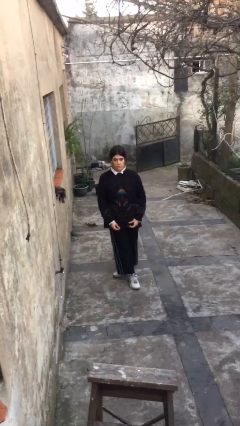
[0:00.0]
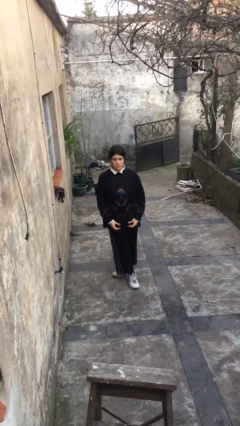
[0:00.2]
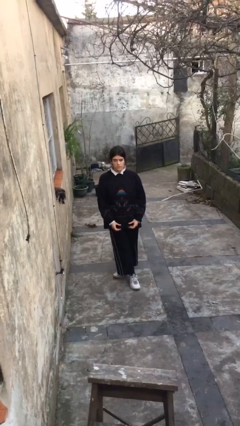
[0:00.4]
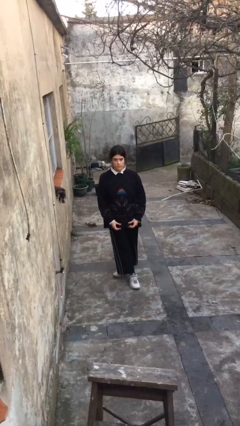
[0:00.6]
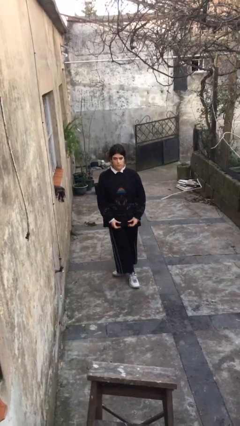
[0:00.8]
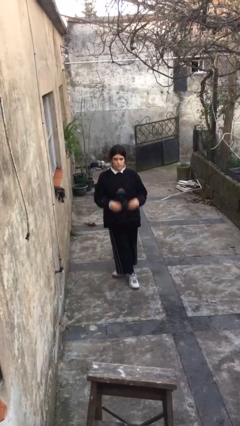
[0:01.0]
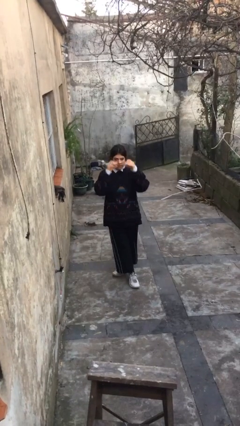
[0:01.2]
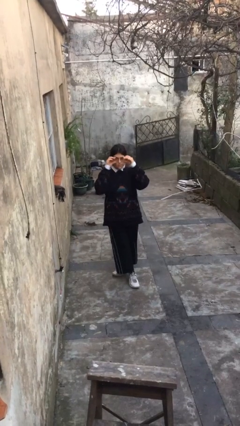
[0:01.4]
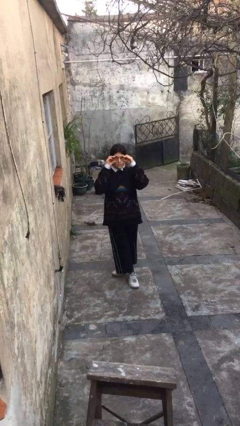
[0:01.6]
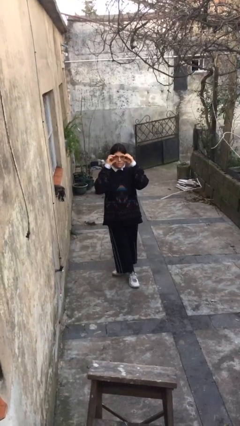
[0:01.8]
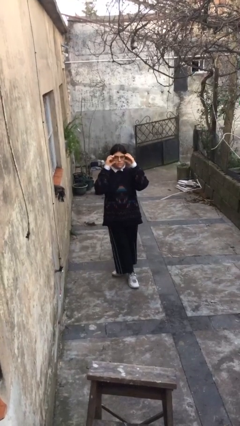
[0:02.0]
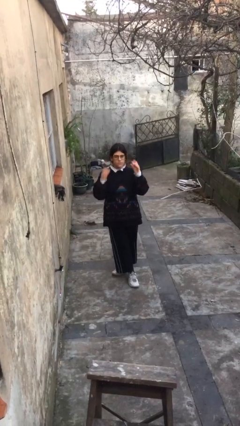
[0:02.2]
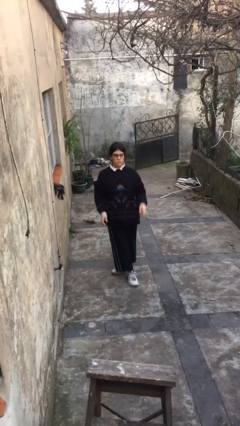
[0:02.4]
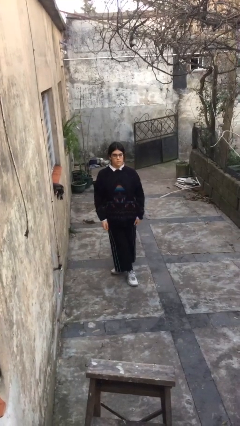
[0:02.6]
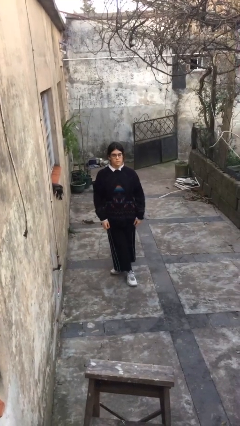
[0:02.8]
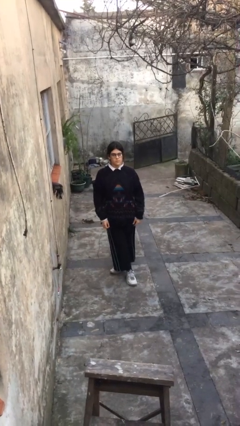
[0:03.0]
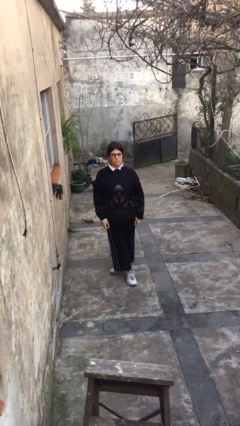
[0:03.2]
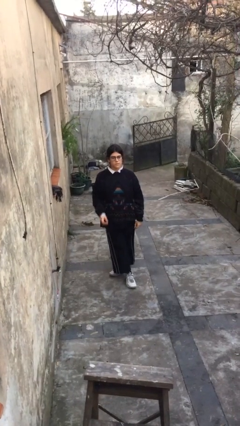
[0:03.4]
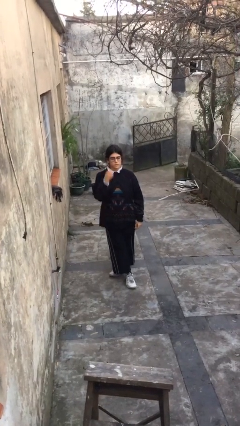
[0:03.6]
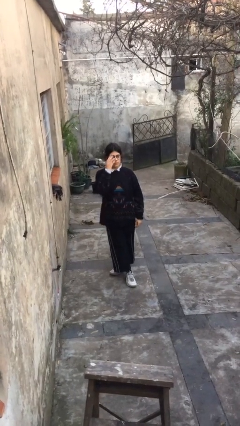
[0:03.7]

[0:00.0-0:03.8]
person puts on glasses

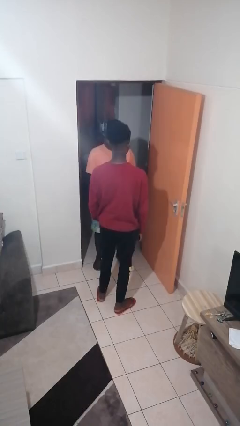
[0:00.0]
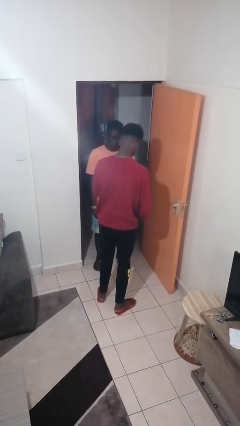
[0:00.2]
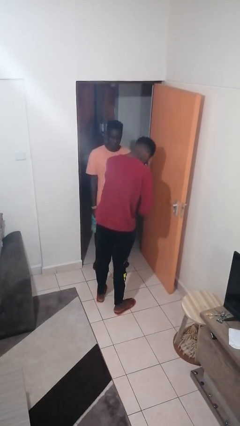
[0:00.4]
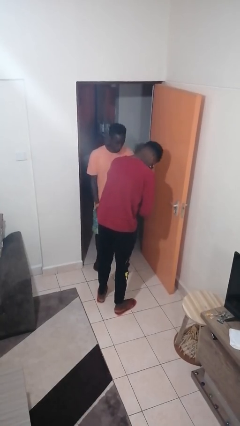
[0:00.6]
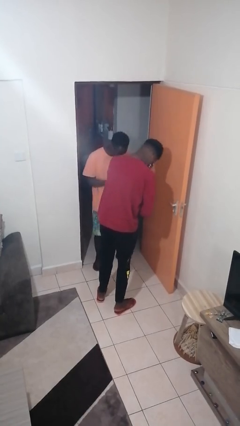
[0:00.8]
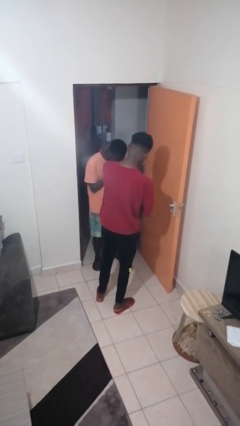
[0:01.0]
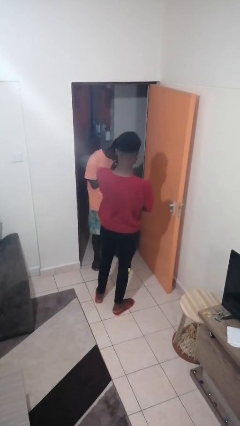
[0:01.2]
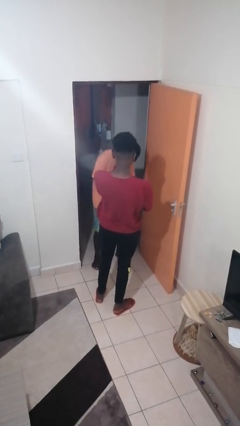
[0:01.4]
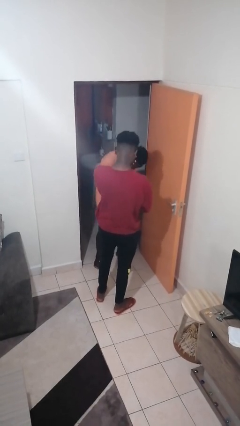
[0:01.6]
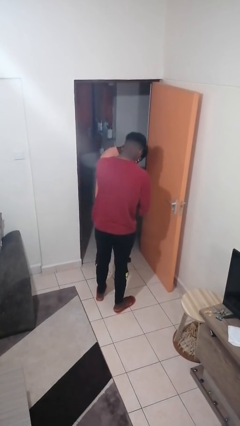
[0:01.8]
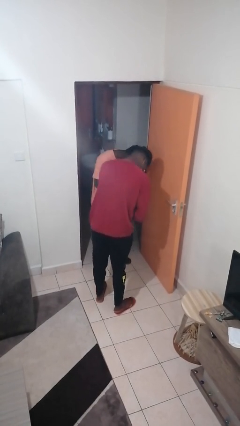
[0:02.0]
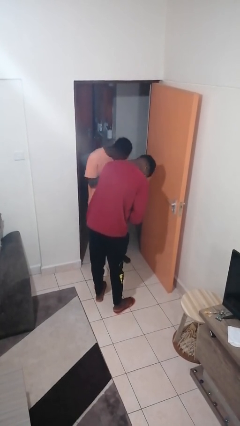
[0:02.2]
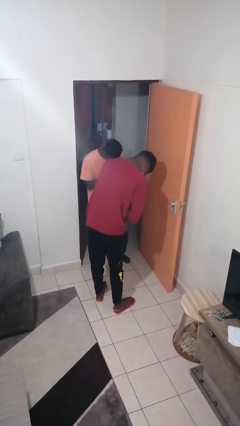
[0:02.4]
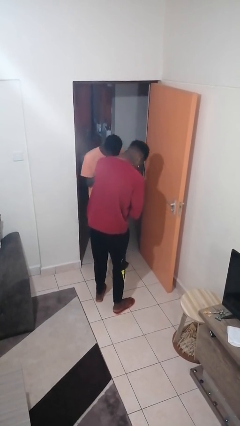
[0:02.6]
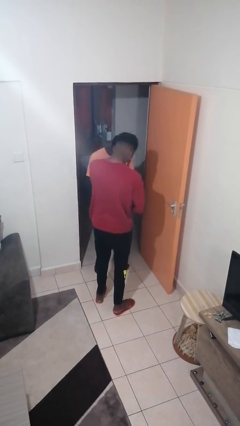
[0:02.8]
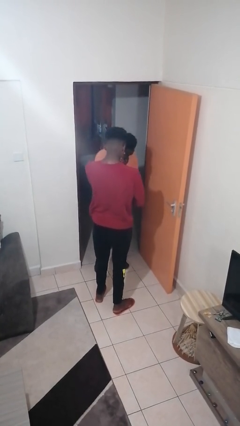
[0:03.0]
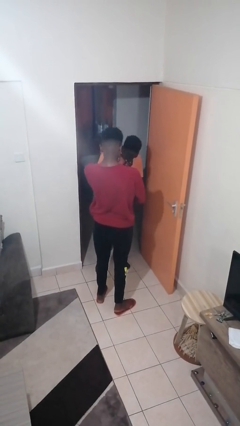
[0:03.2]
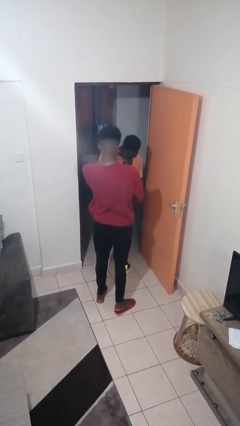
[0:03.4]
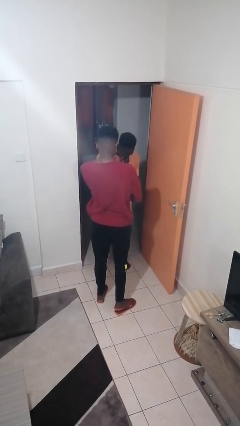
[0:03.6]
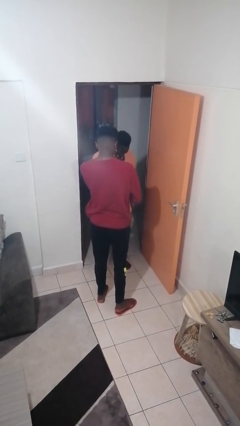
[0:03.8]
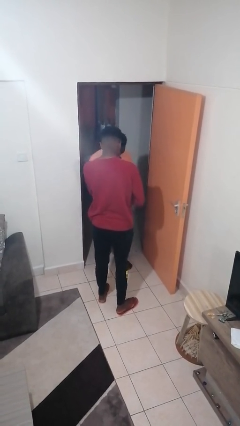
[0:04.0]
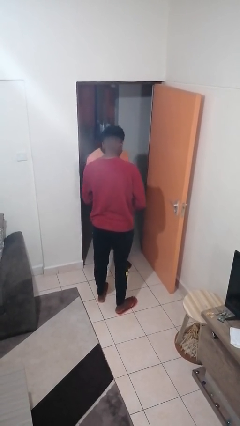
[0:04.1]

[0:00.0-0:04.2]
person laughs with person

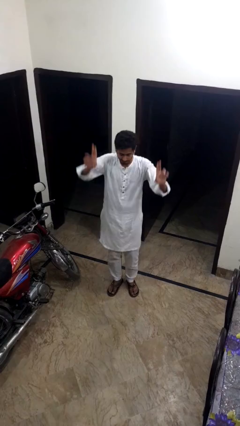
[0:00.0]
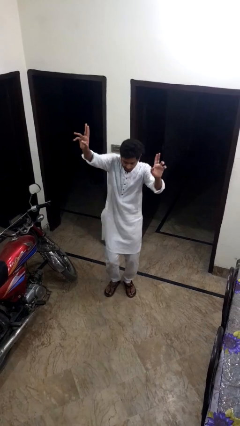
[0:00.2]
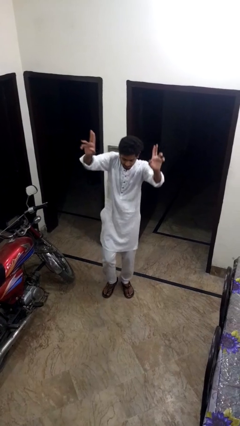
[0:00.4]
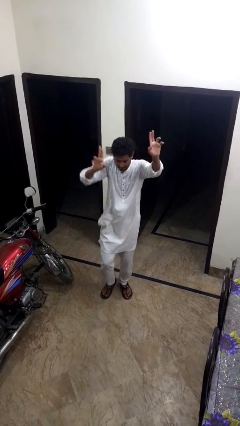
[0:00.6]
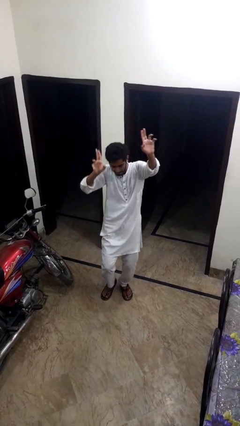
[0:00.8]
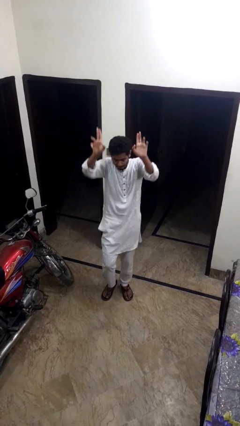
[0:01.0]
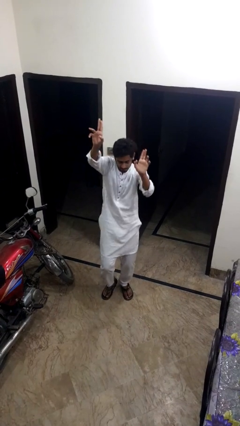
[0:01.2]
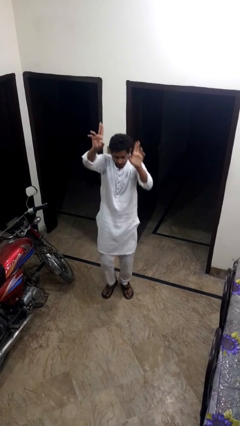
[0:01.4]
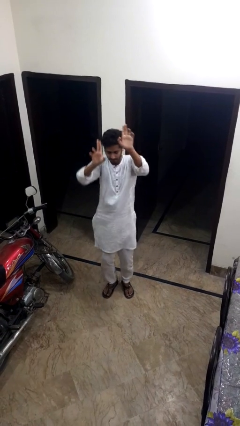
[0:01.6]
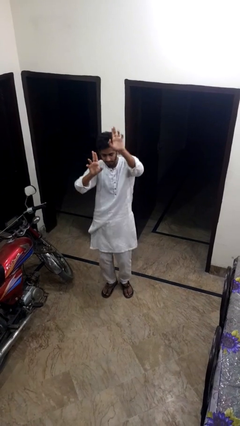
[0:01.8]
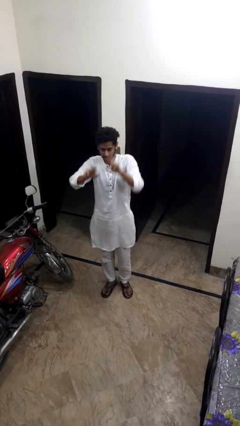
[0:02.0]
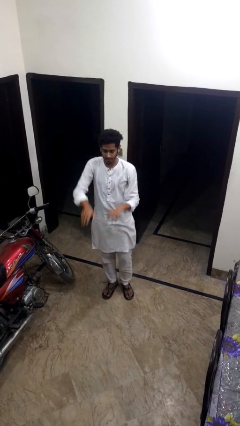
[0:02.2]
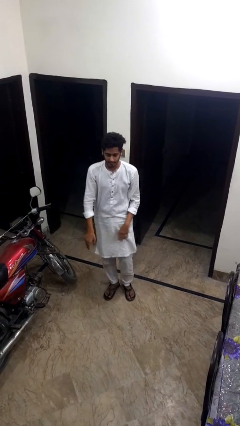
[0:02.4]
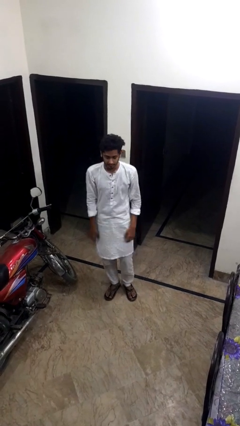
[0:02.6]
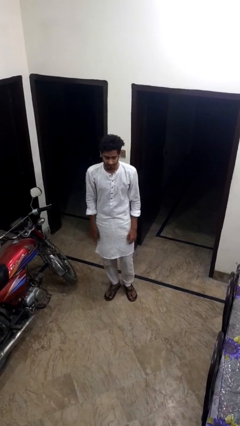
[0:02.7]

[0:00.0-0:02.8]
person dances in place

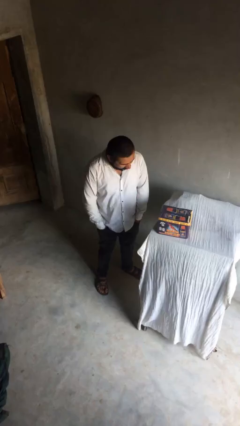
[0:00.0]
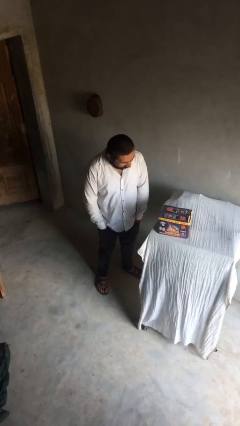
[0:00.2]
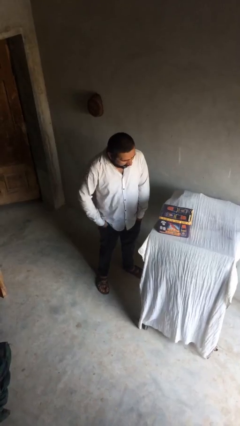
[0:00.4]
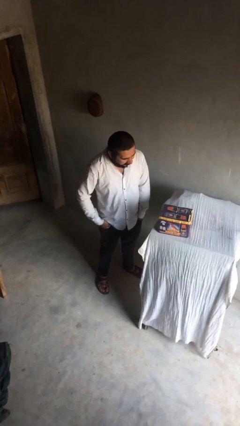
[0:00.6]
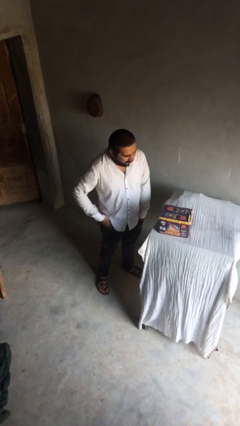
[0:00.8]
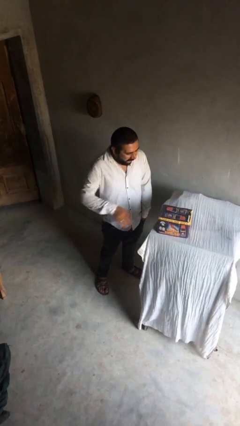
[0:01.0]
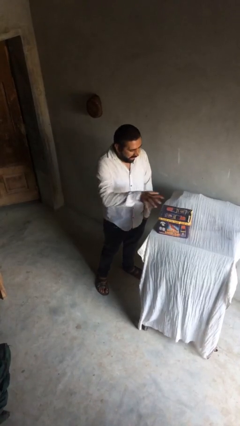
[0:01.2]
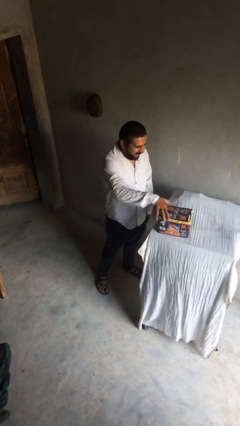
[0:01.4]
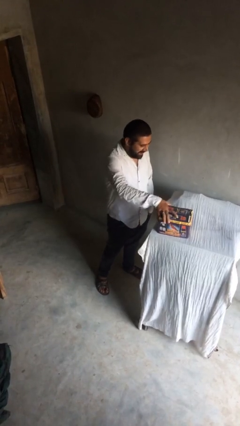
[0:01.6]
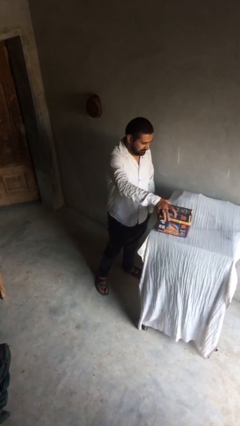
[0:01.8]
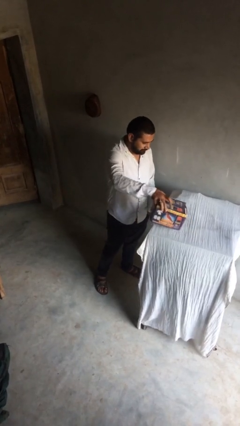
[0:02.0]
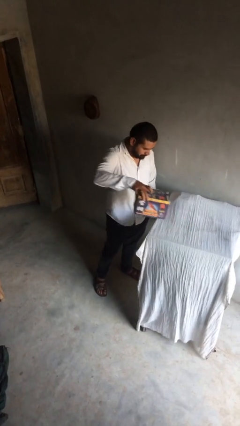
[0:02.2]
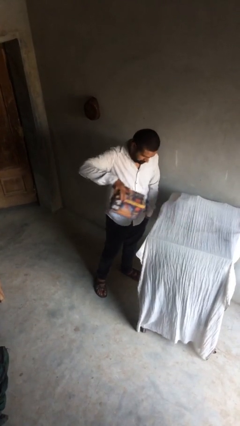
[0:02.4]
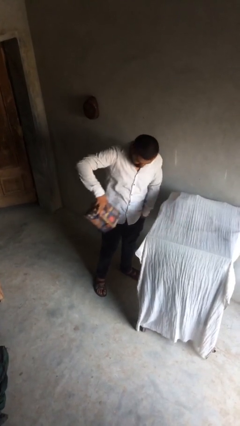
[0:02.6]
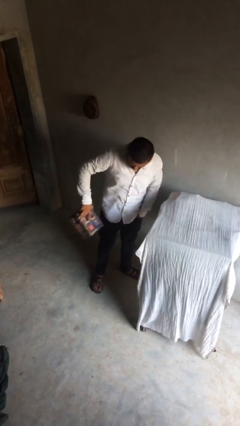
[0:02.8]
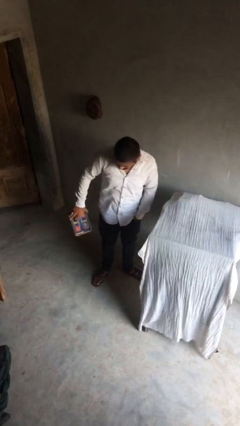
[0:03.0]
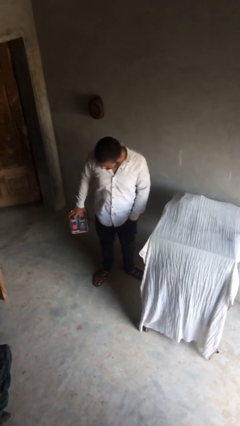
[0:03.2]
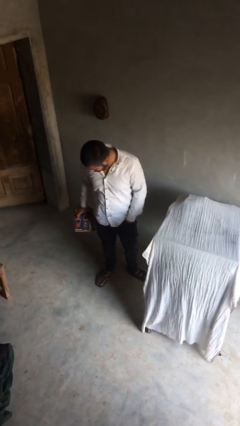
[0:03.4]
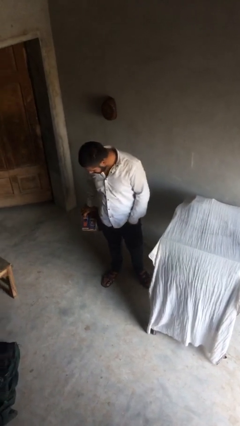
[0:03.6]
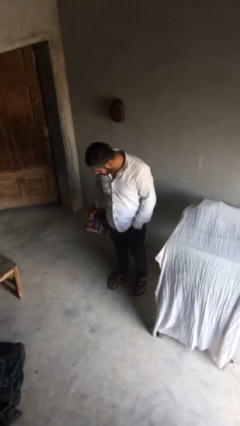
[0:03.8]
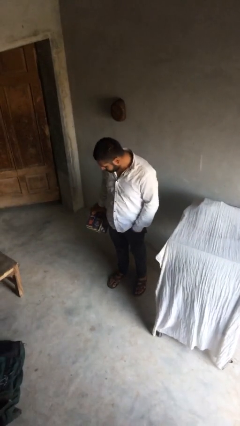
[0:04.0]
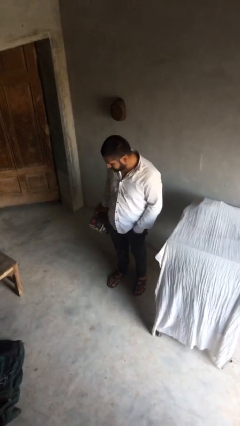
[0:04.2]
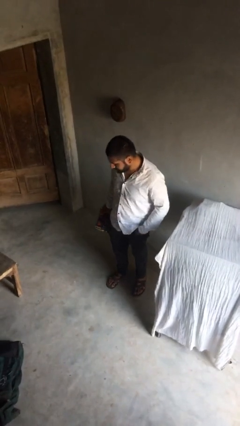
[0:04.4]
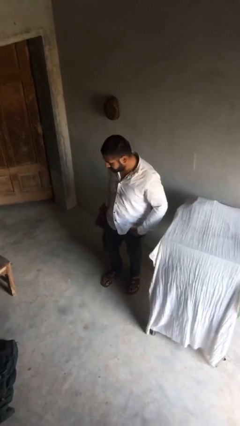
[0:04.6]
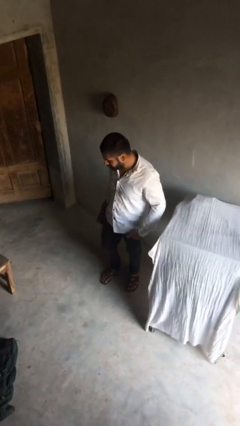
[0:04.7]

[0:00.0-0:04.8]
person picks up object from shelf

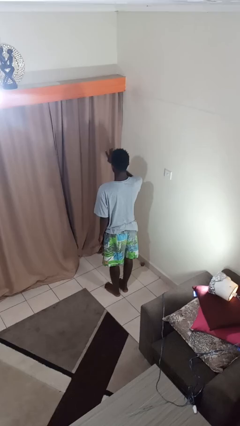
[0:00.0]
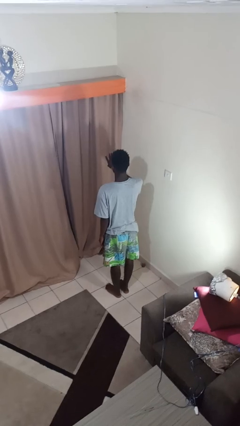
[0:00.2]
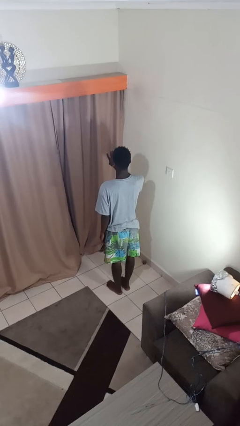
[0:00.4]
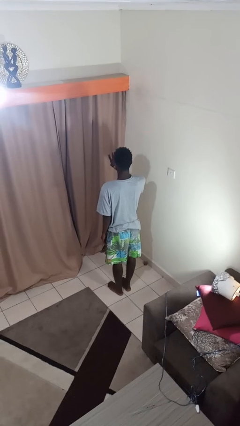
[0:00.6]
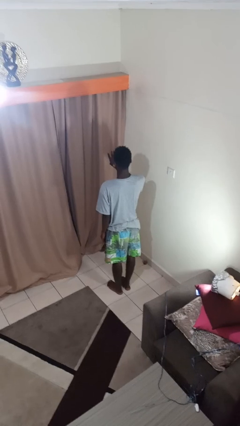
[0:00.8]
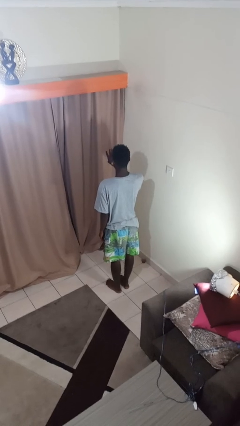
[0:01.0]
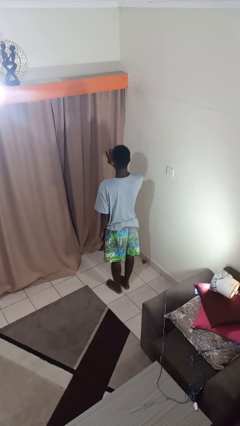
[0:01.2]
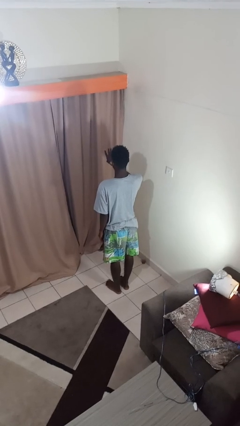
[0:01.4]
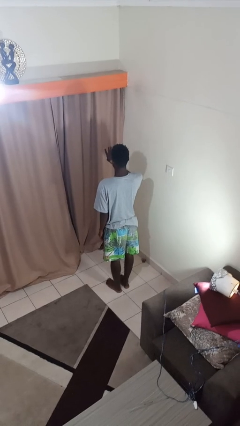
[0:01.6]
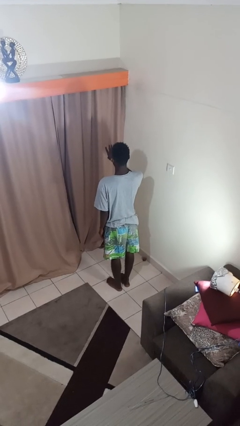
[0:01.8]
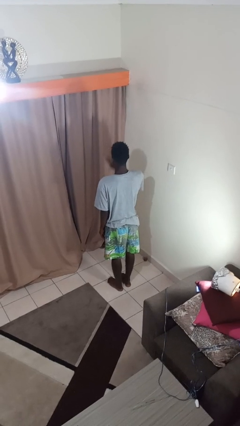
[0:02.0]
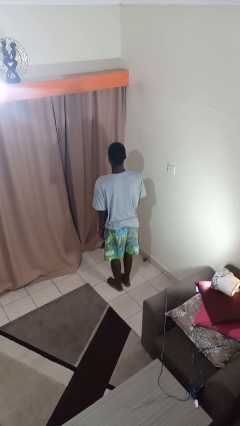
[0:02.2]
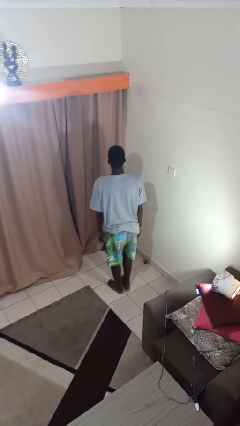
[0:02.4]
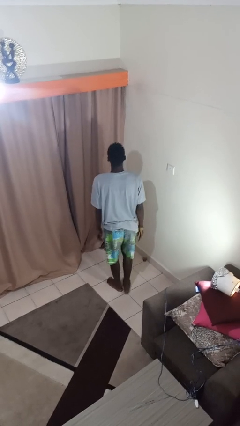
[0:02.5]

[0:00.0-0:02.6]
person gestures number four
